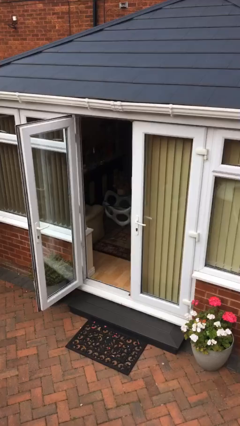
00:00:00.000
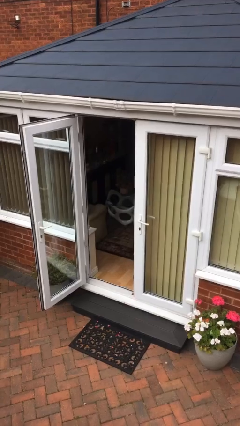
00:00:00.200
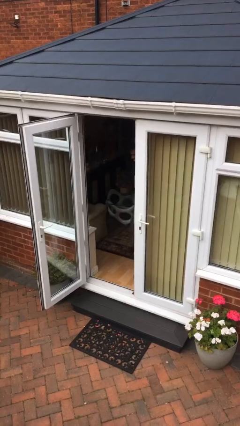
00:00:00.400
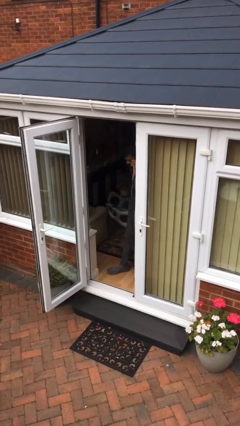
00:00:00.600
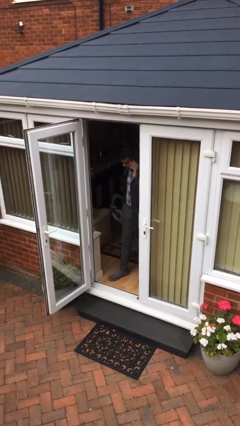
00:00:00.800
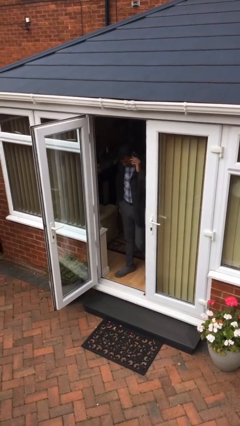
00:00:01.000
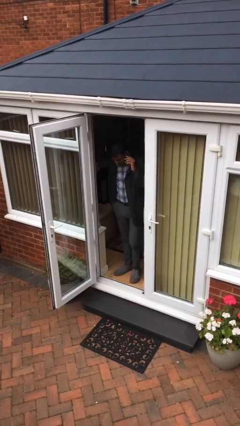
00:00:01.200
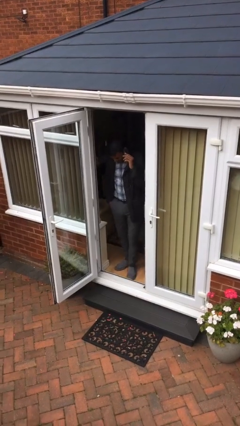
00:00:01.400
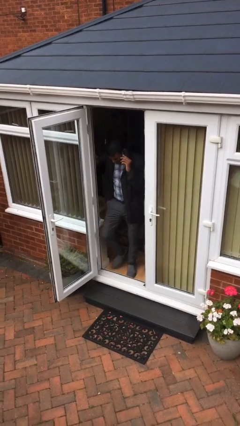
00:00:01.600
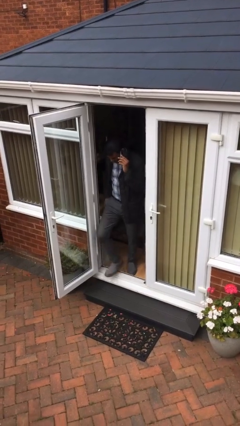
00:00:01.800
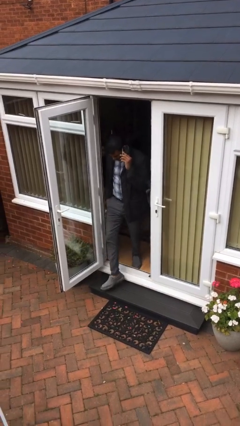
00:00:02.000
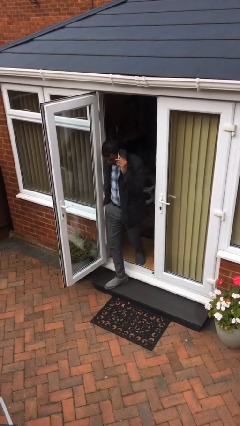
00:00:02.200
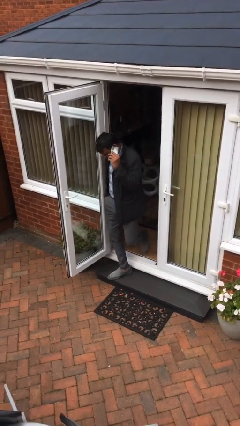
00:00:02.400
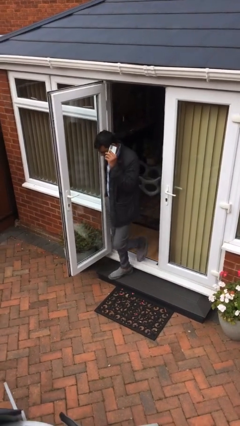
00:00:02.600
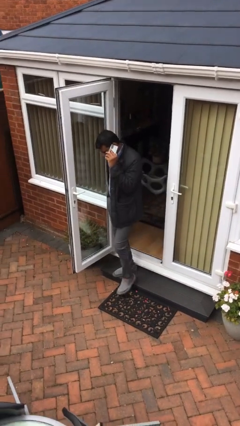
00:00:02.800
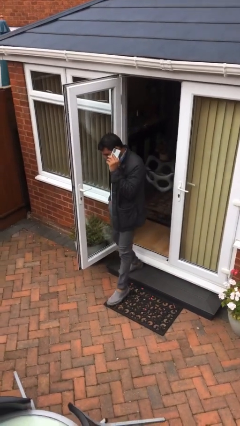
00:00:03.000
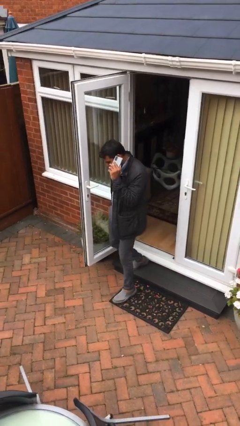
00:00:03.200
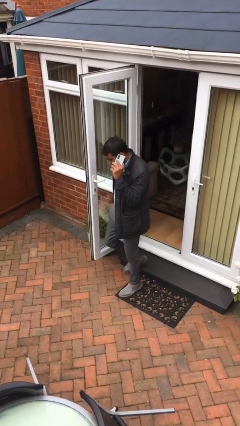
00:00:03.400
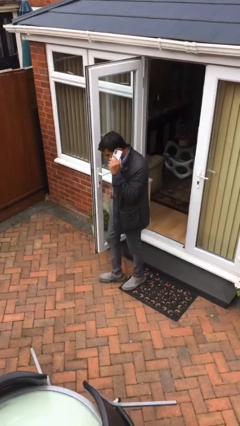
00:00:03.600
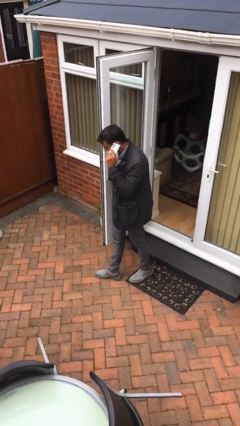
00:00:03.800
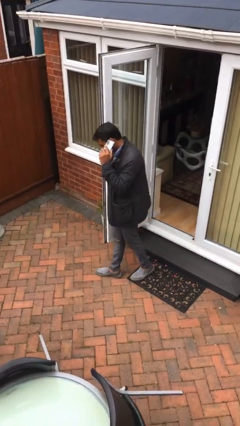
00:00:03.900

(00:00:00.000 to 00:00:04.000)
person enters scene through structure

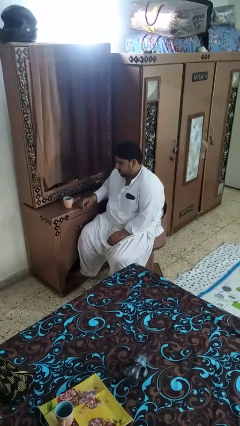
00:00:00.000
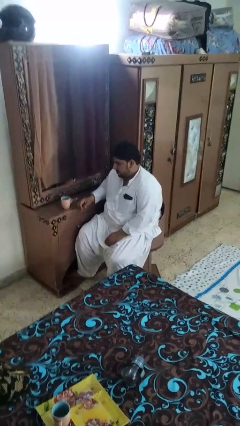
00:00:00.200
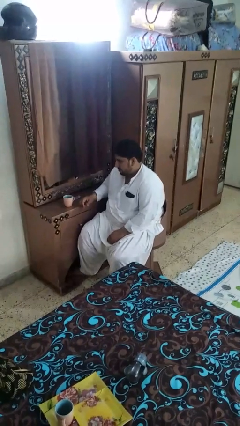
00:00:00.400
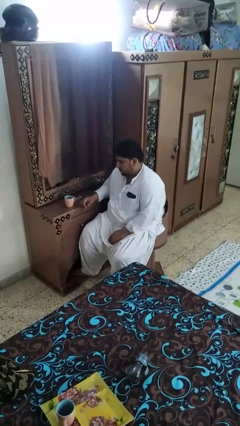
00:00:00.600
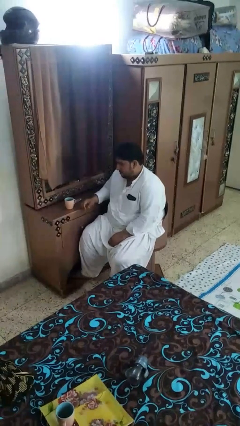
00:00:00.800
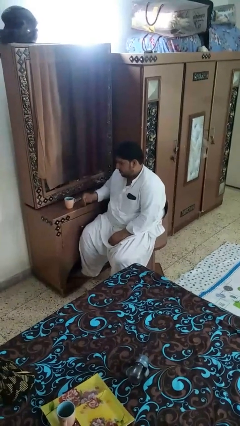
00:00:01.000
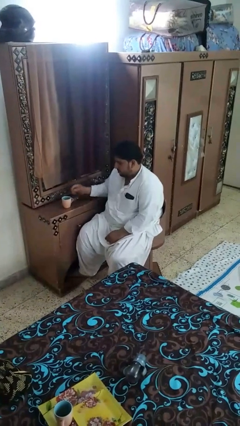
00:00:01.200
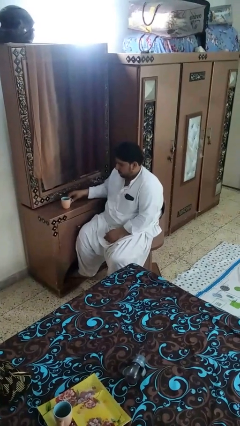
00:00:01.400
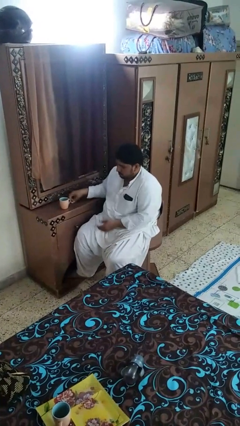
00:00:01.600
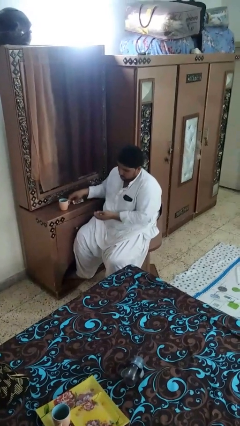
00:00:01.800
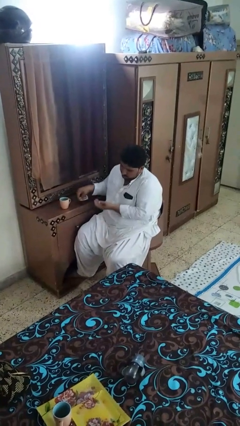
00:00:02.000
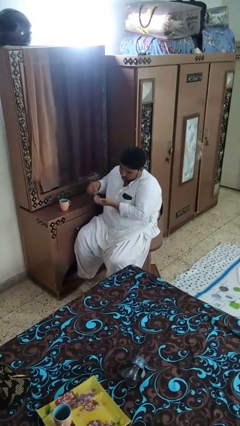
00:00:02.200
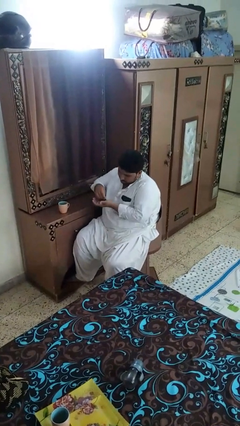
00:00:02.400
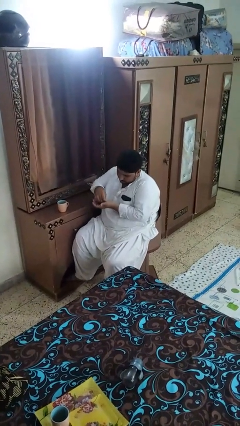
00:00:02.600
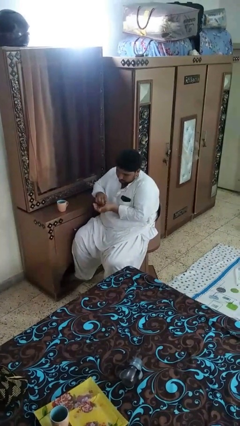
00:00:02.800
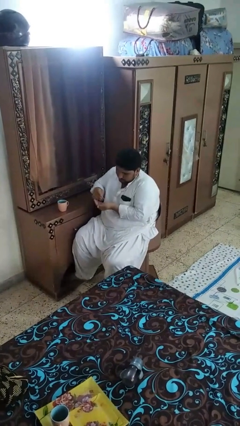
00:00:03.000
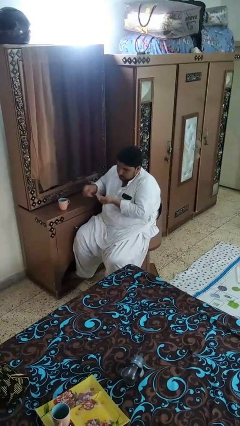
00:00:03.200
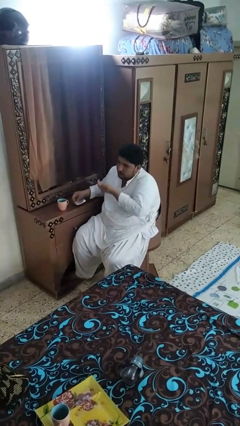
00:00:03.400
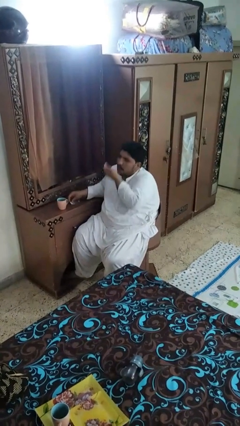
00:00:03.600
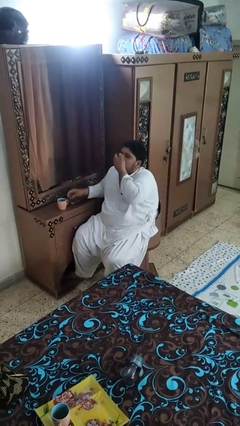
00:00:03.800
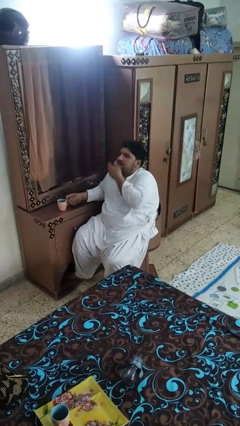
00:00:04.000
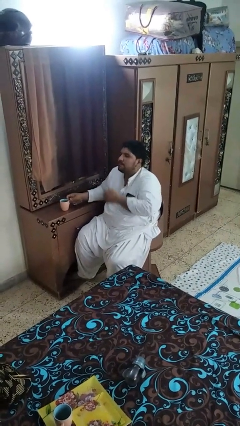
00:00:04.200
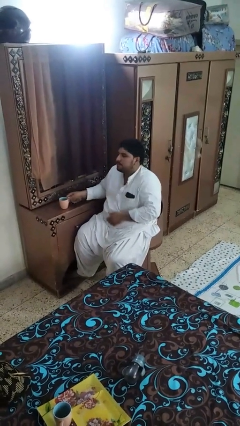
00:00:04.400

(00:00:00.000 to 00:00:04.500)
person takes medicine pills

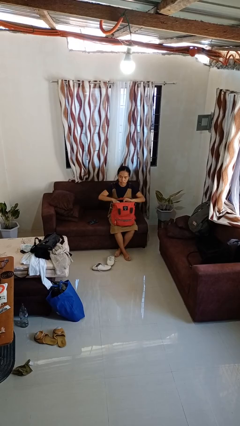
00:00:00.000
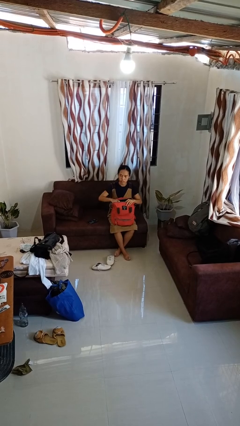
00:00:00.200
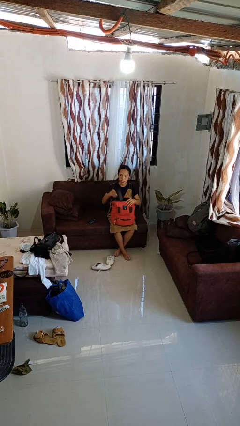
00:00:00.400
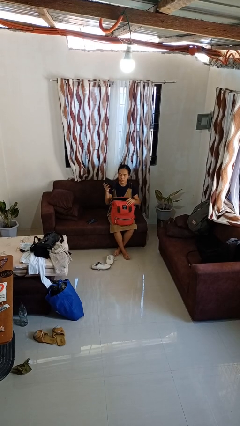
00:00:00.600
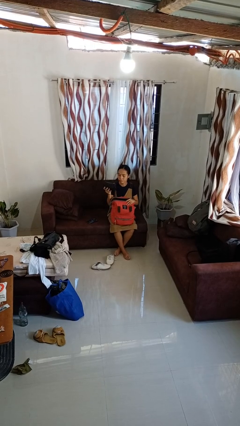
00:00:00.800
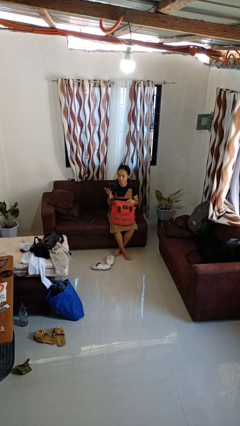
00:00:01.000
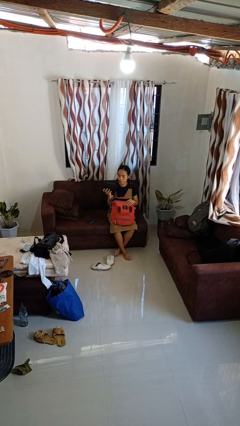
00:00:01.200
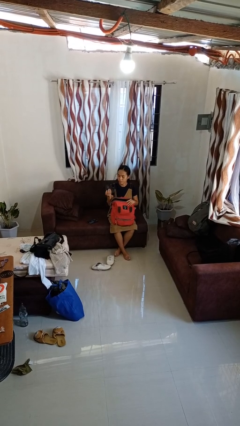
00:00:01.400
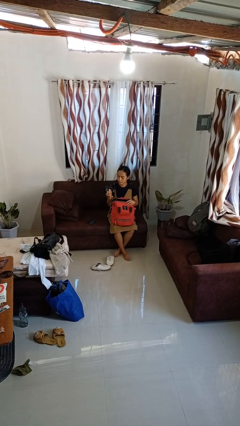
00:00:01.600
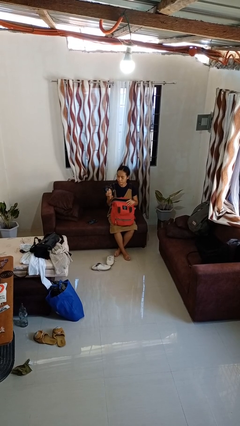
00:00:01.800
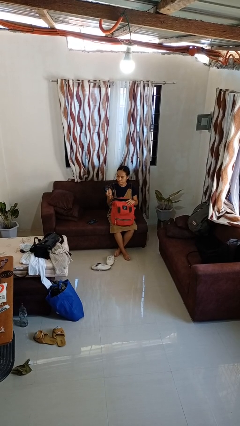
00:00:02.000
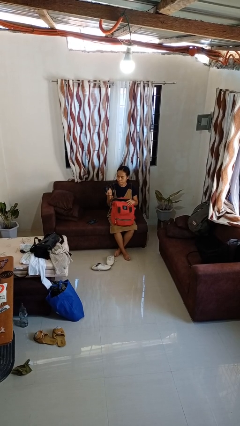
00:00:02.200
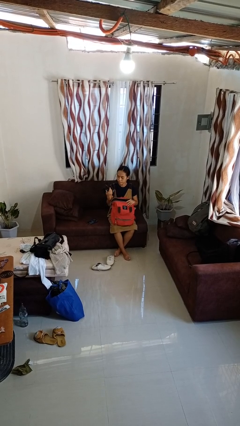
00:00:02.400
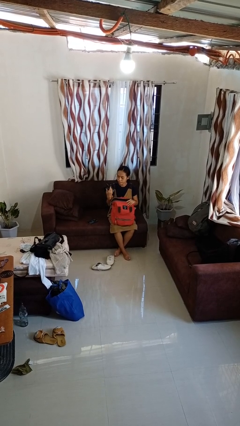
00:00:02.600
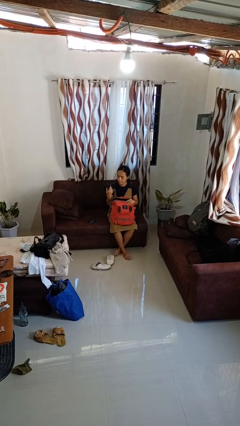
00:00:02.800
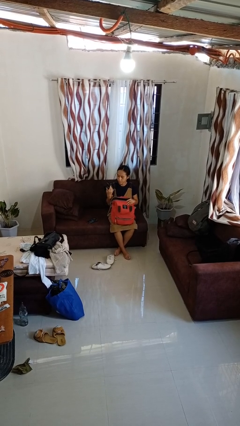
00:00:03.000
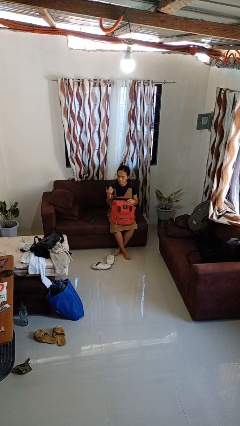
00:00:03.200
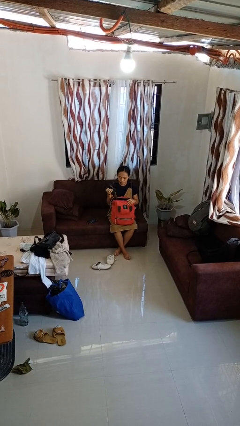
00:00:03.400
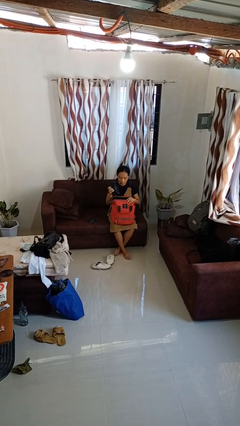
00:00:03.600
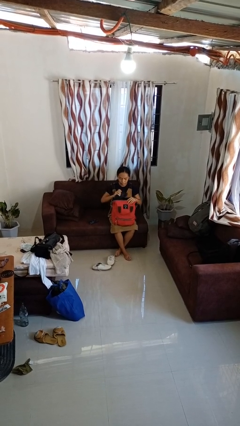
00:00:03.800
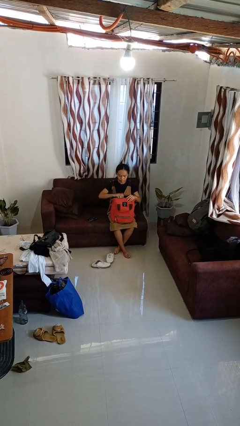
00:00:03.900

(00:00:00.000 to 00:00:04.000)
person takes object from backpack

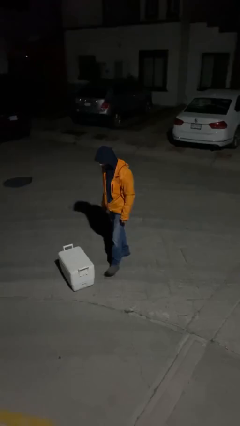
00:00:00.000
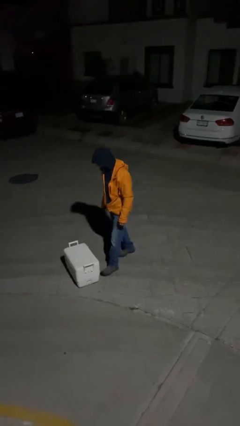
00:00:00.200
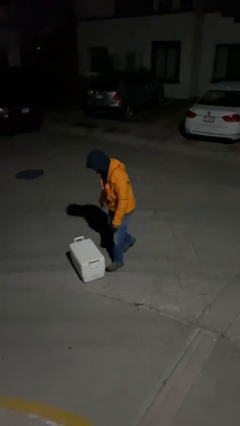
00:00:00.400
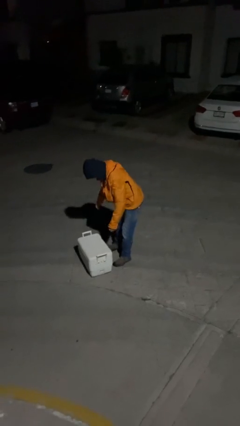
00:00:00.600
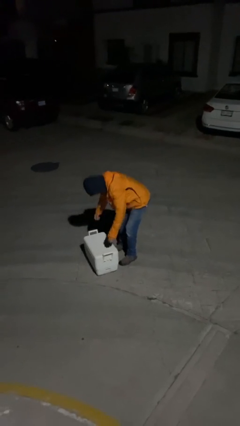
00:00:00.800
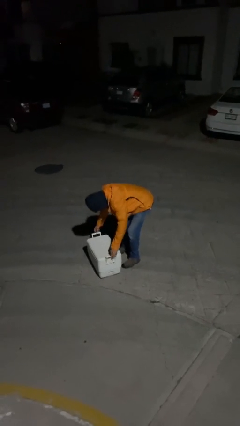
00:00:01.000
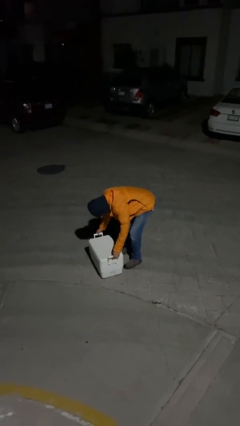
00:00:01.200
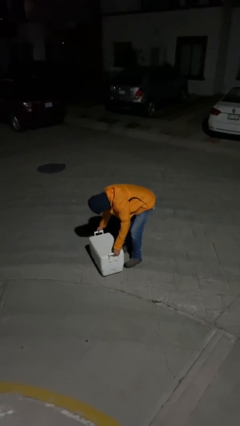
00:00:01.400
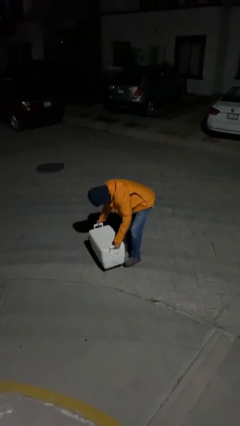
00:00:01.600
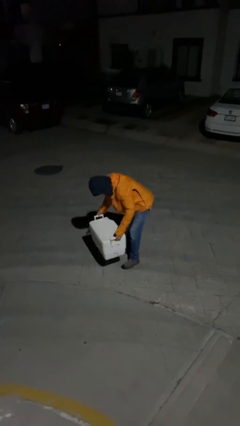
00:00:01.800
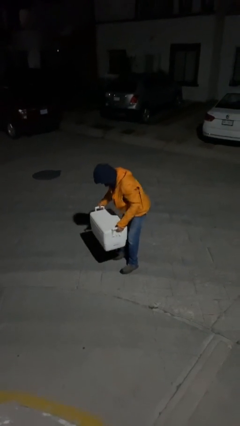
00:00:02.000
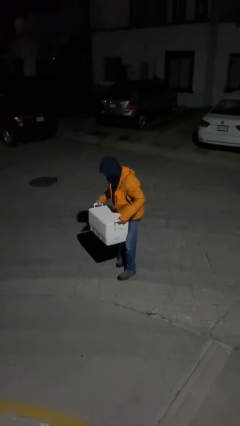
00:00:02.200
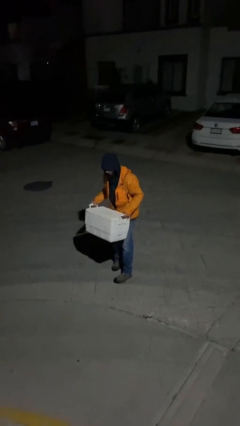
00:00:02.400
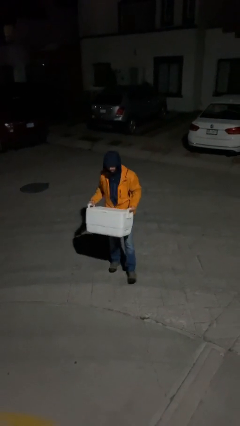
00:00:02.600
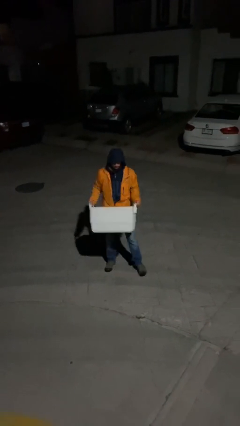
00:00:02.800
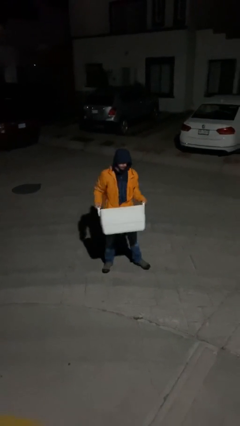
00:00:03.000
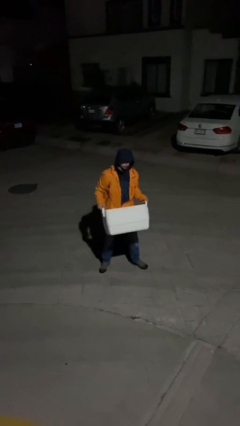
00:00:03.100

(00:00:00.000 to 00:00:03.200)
person picks up object from floor

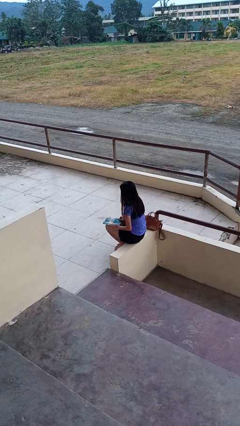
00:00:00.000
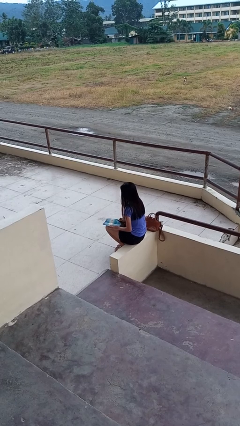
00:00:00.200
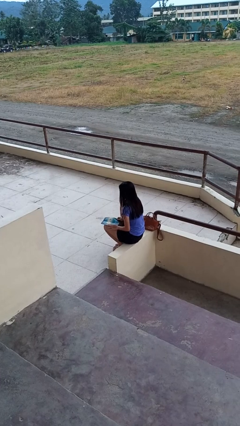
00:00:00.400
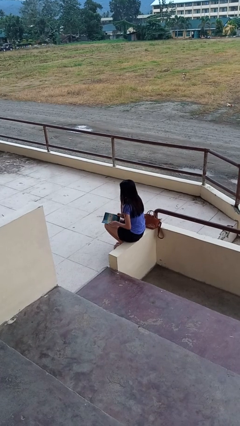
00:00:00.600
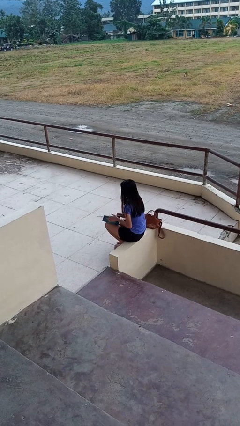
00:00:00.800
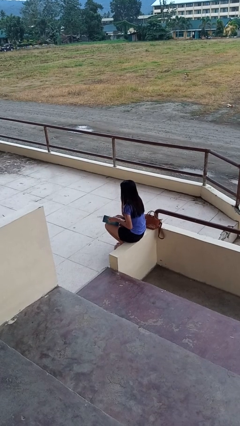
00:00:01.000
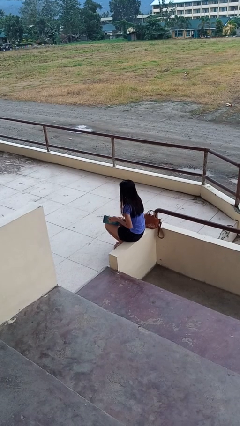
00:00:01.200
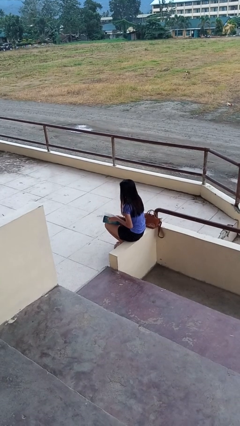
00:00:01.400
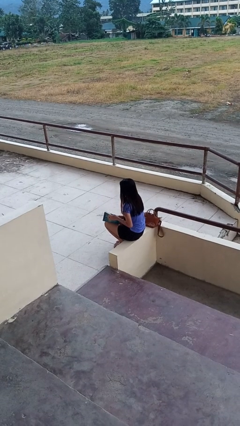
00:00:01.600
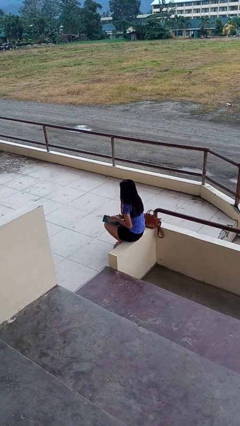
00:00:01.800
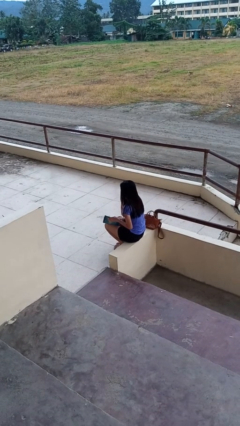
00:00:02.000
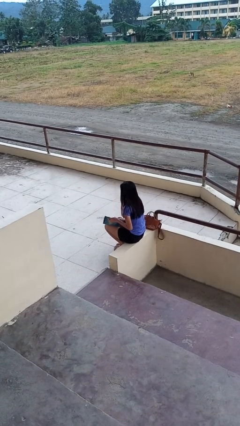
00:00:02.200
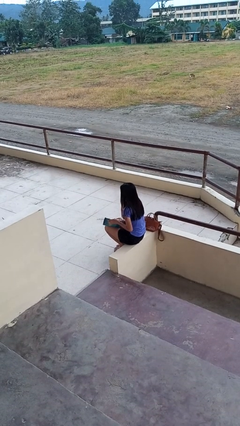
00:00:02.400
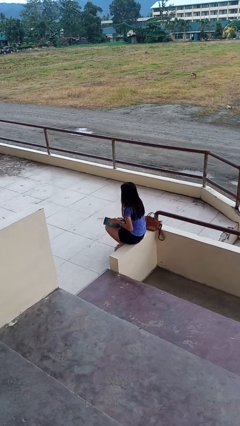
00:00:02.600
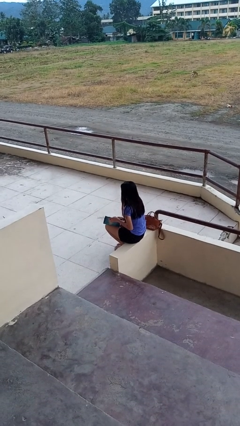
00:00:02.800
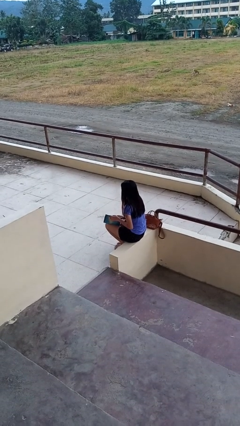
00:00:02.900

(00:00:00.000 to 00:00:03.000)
person reads magazine
